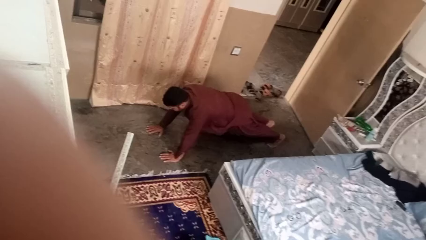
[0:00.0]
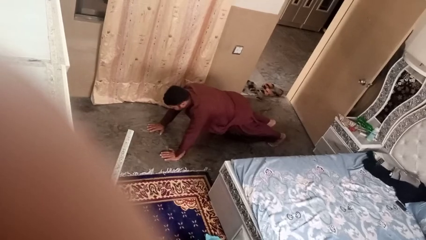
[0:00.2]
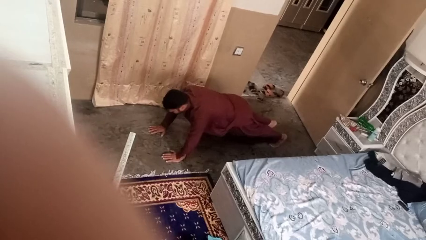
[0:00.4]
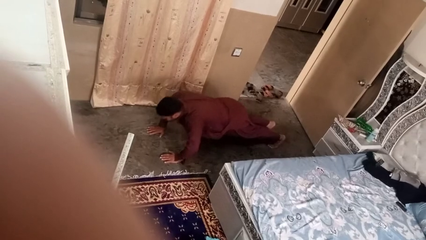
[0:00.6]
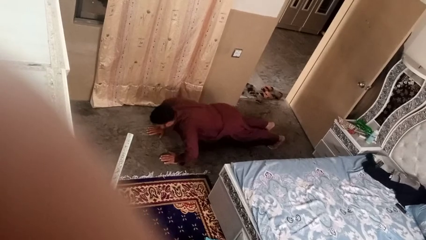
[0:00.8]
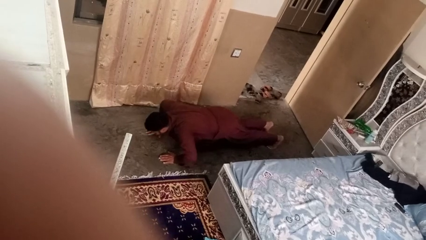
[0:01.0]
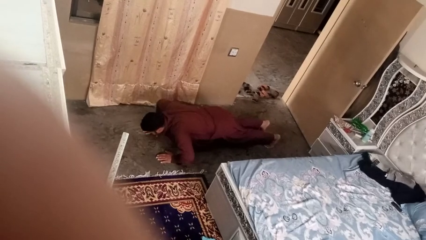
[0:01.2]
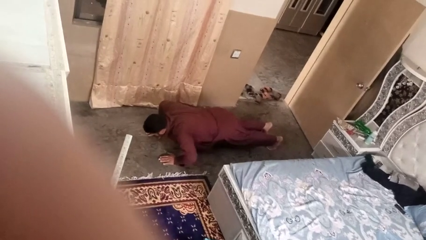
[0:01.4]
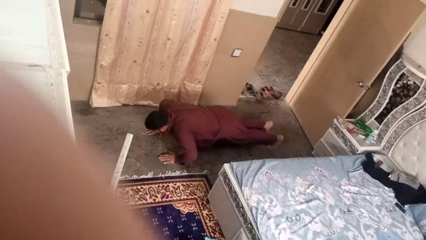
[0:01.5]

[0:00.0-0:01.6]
person exercises with pushup

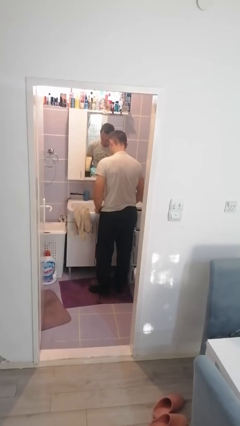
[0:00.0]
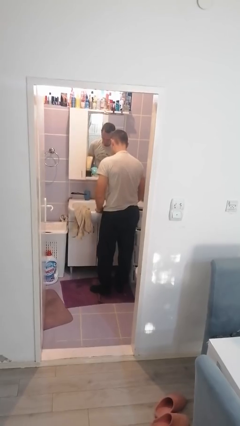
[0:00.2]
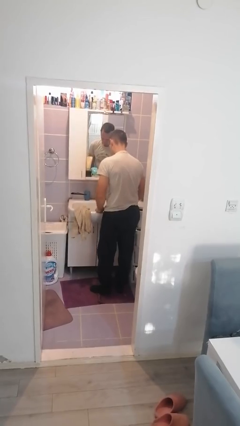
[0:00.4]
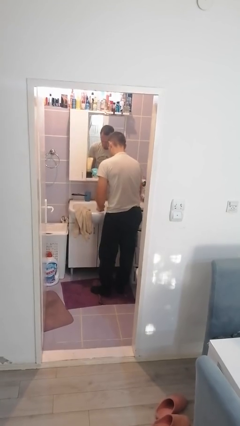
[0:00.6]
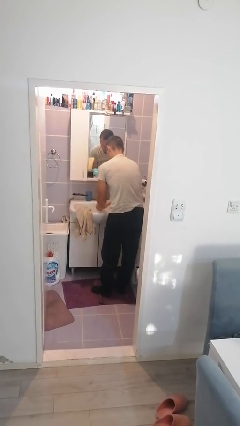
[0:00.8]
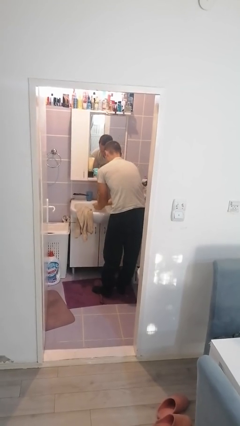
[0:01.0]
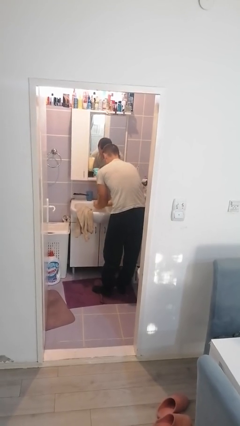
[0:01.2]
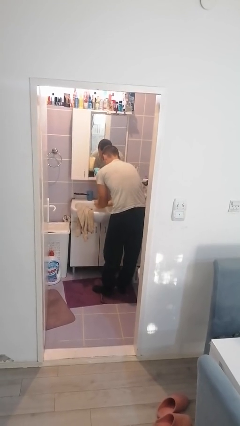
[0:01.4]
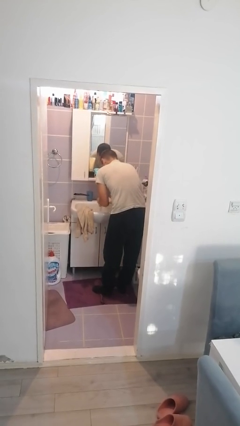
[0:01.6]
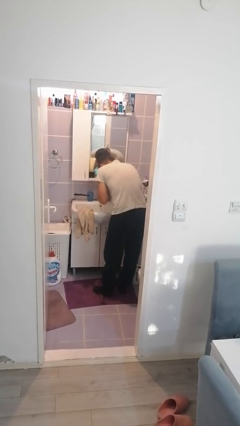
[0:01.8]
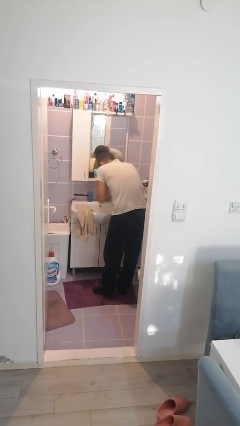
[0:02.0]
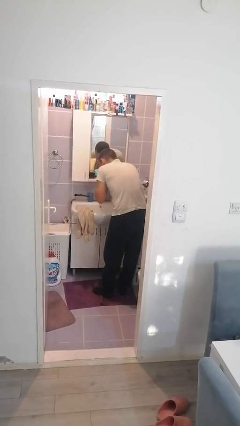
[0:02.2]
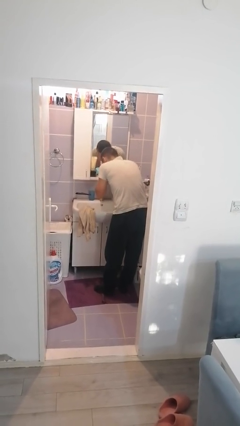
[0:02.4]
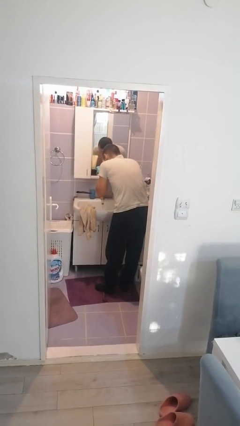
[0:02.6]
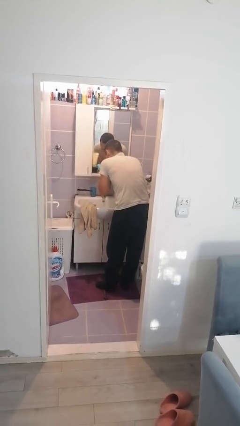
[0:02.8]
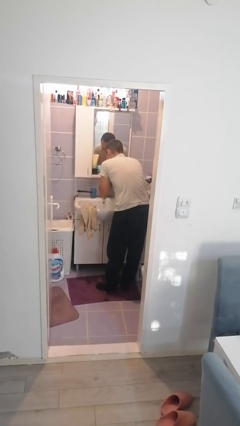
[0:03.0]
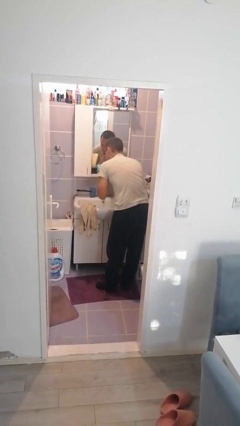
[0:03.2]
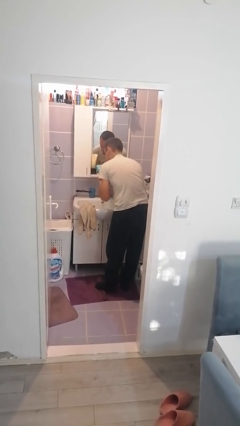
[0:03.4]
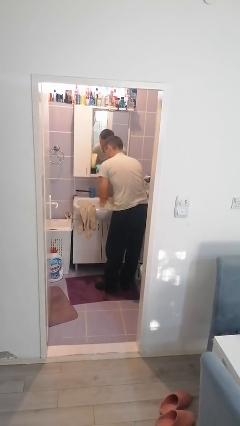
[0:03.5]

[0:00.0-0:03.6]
person washes face

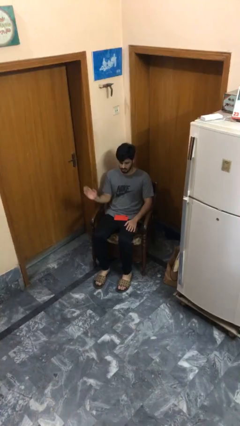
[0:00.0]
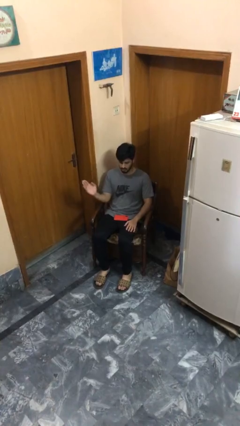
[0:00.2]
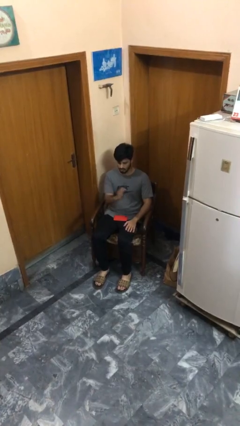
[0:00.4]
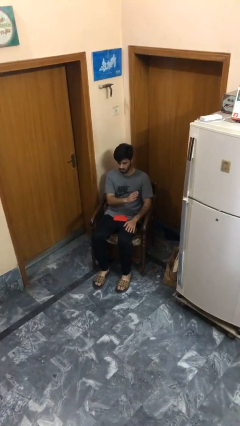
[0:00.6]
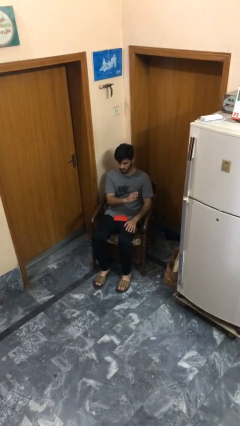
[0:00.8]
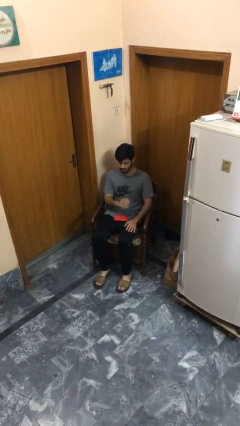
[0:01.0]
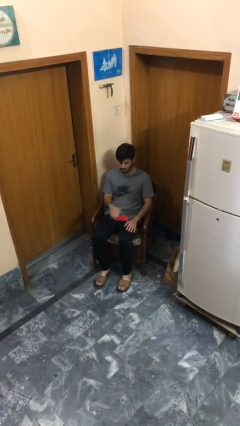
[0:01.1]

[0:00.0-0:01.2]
person gestures swipe left

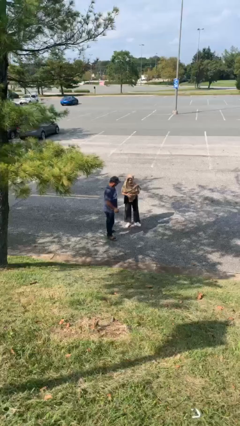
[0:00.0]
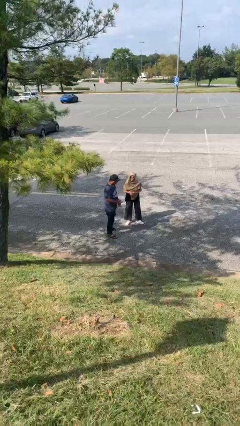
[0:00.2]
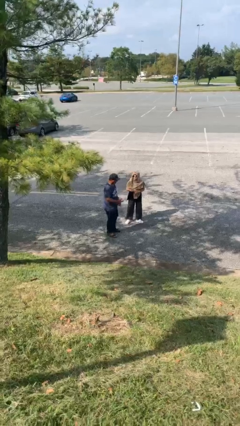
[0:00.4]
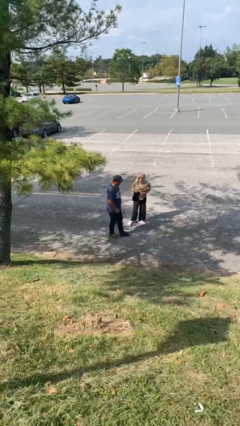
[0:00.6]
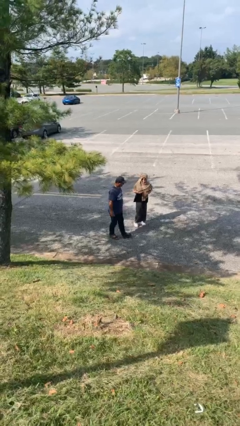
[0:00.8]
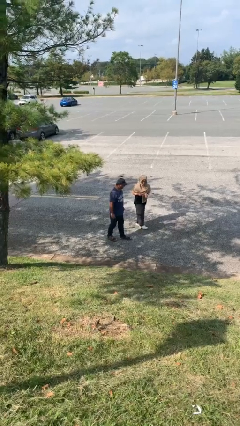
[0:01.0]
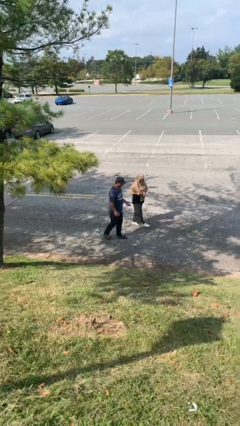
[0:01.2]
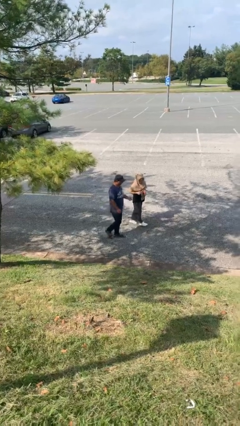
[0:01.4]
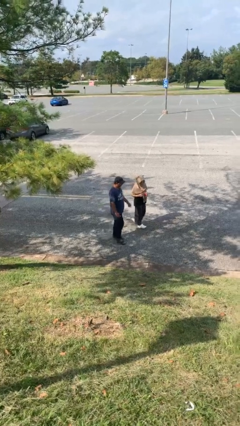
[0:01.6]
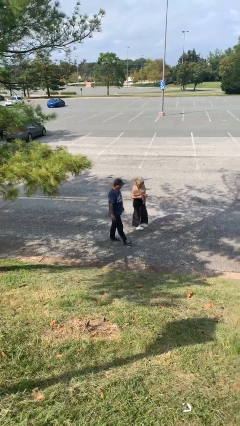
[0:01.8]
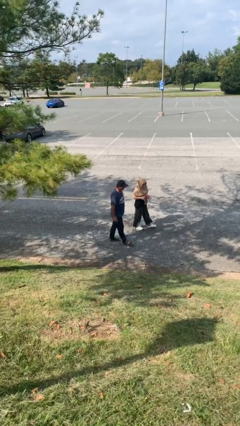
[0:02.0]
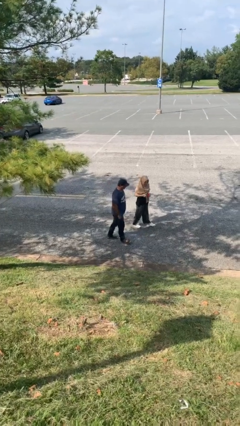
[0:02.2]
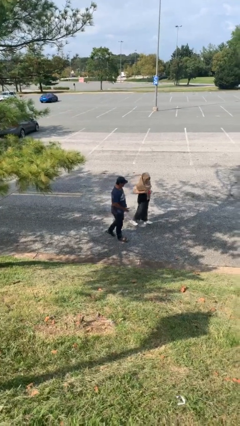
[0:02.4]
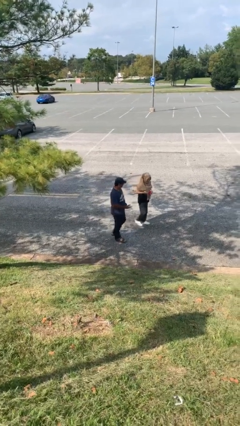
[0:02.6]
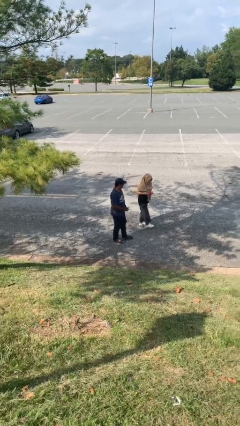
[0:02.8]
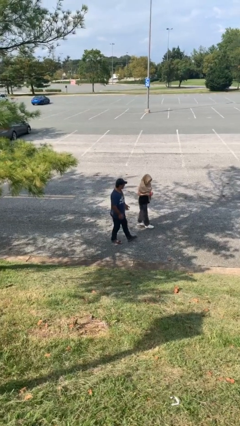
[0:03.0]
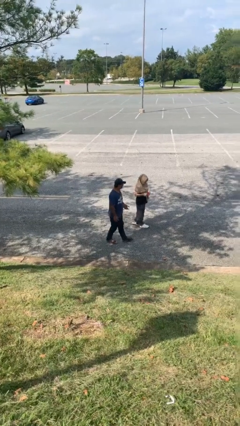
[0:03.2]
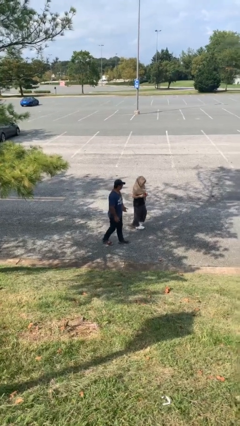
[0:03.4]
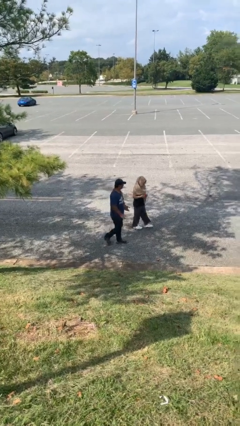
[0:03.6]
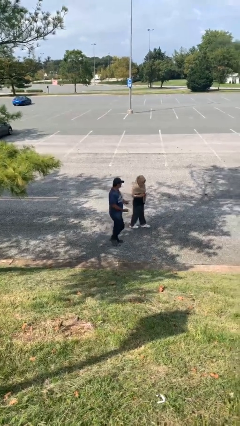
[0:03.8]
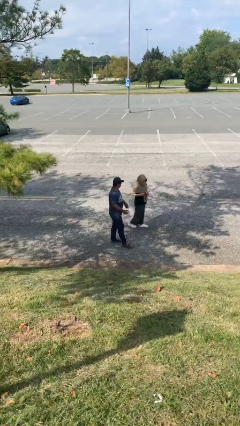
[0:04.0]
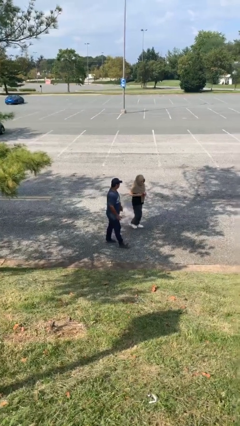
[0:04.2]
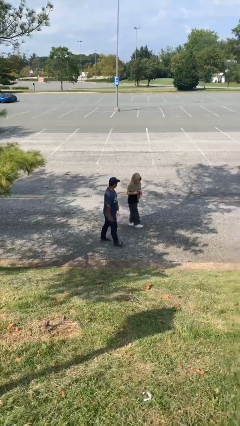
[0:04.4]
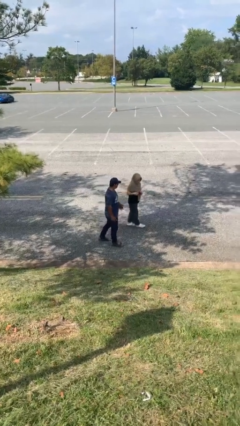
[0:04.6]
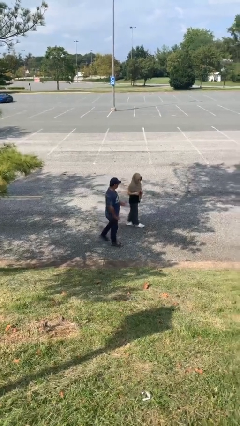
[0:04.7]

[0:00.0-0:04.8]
person talks to person

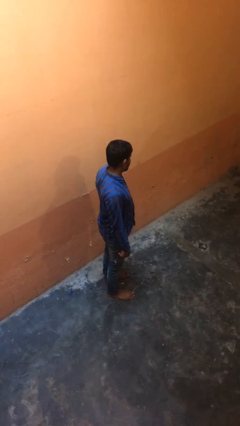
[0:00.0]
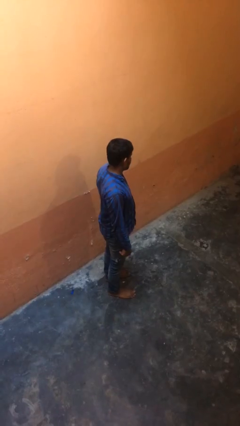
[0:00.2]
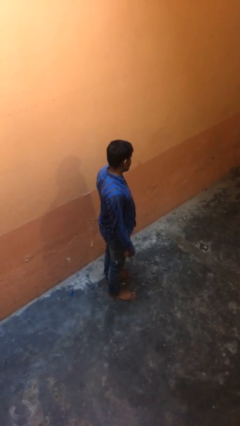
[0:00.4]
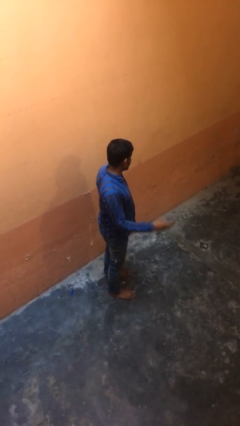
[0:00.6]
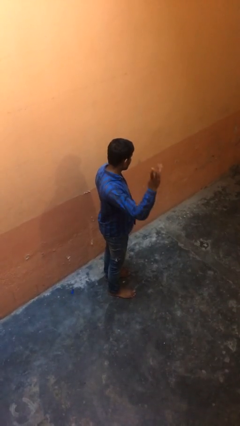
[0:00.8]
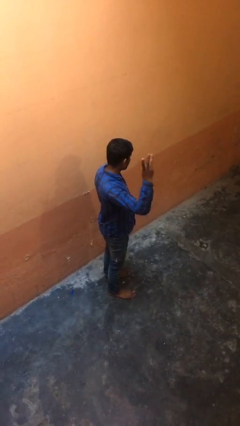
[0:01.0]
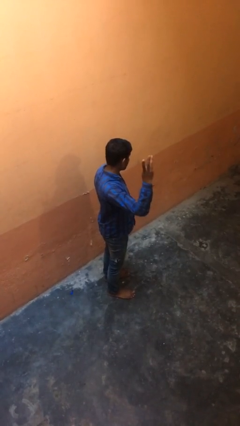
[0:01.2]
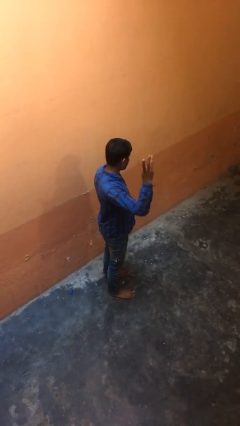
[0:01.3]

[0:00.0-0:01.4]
person gestures number three

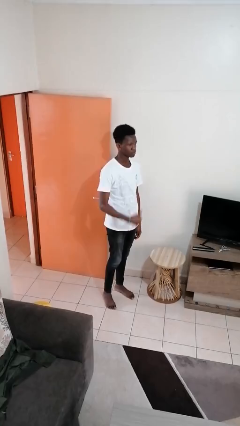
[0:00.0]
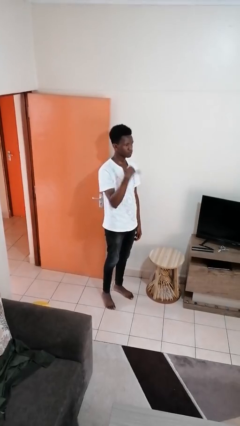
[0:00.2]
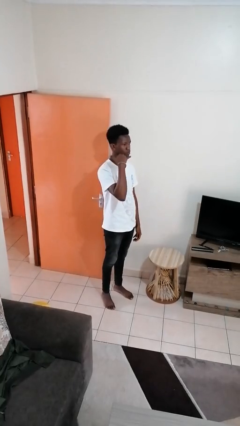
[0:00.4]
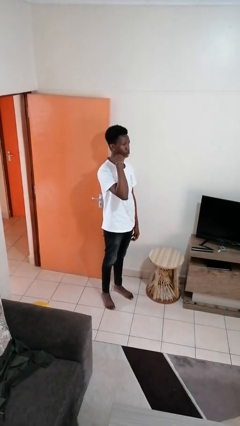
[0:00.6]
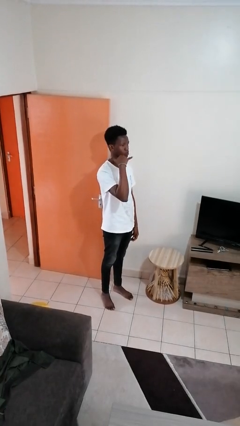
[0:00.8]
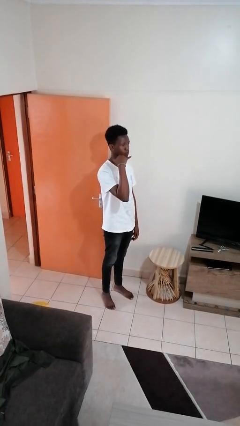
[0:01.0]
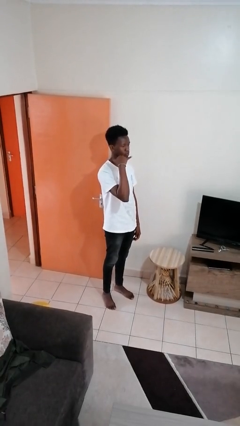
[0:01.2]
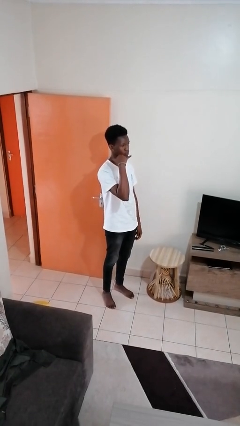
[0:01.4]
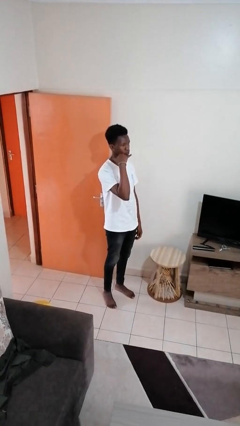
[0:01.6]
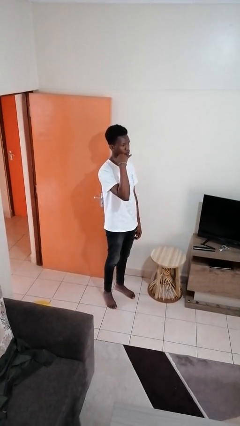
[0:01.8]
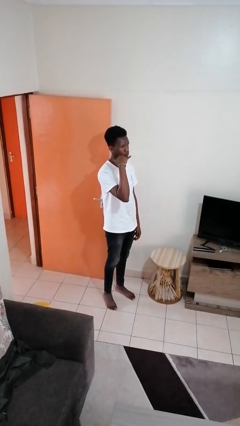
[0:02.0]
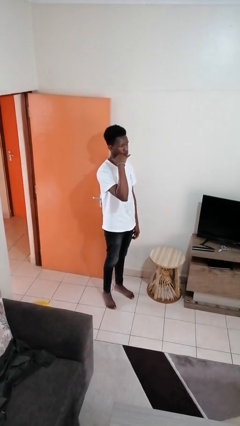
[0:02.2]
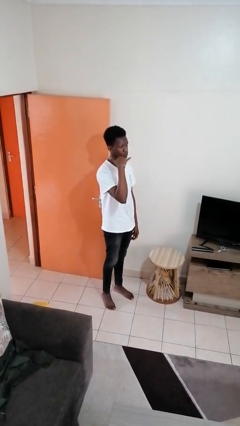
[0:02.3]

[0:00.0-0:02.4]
person gestures call me

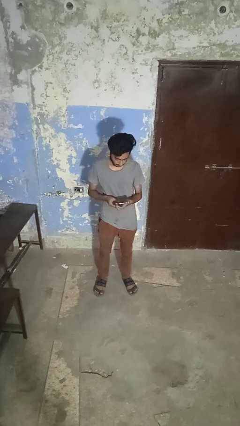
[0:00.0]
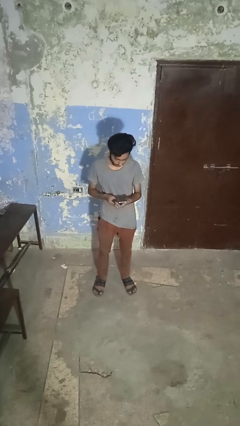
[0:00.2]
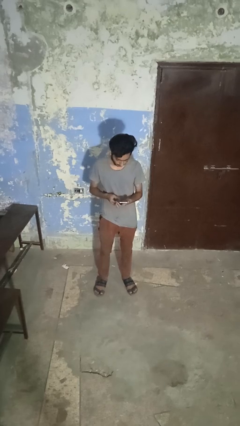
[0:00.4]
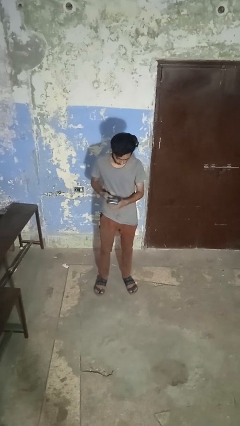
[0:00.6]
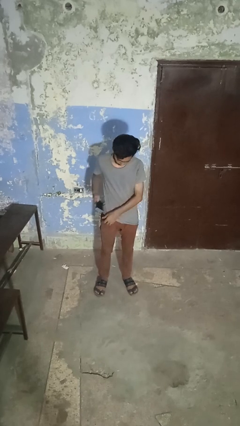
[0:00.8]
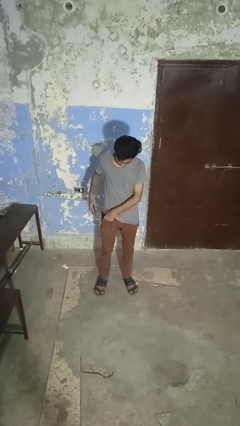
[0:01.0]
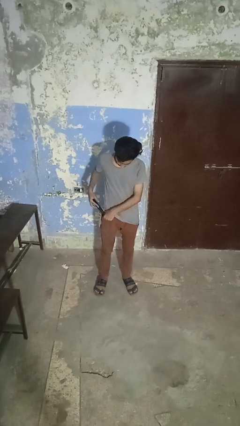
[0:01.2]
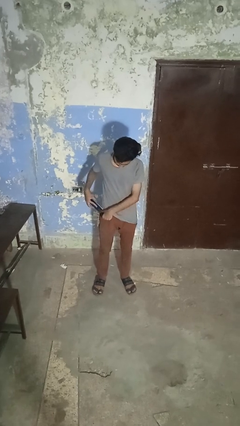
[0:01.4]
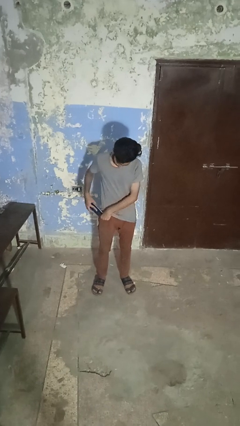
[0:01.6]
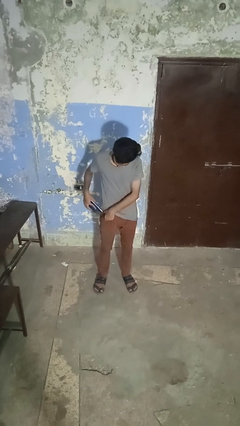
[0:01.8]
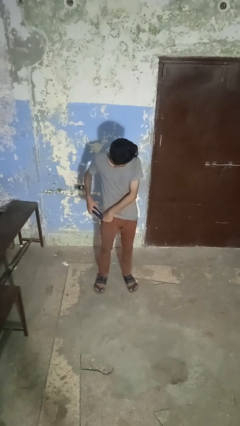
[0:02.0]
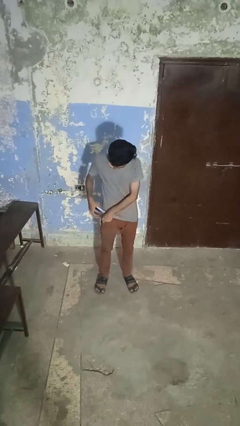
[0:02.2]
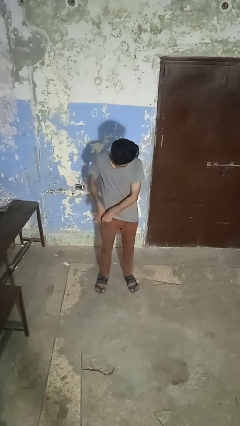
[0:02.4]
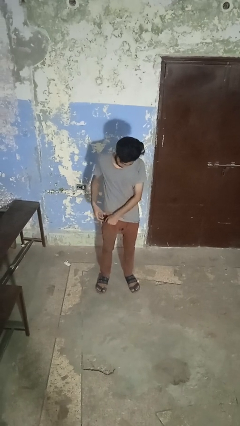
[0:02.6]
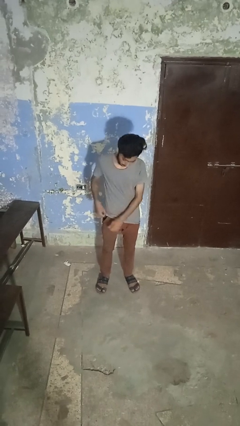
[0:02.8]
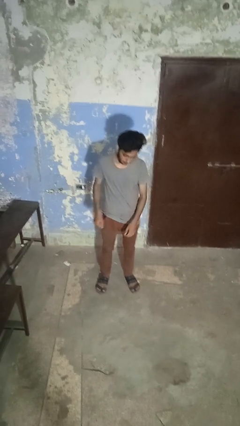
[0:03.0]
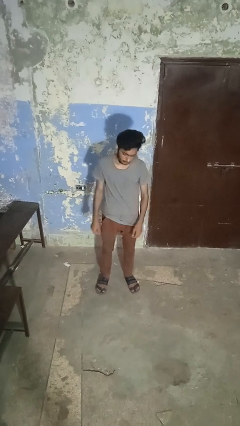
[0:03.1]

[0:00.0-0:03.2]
person puts phone into pocket
